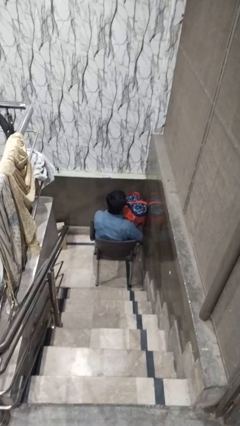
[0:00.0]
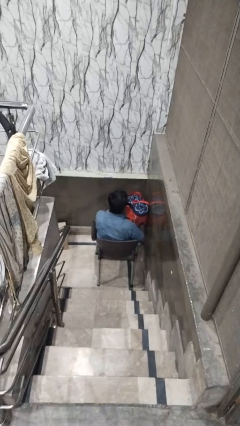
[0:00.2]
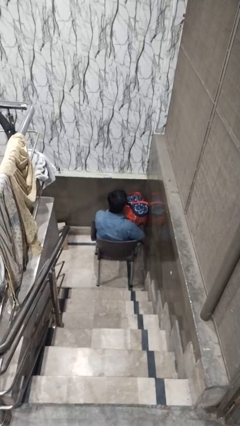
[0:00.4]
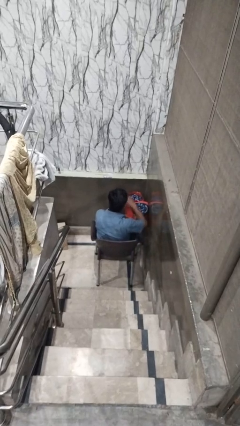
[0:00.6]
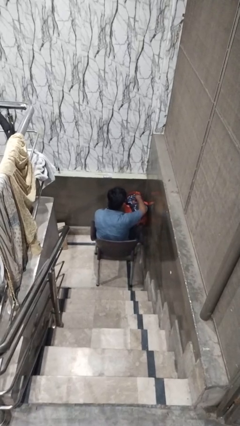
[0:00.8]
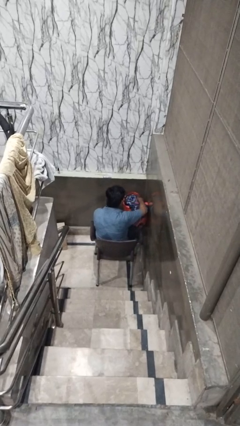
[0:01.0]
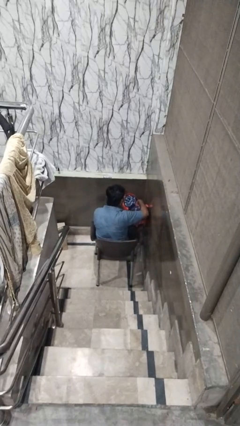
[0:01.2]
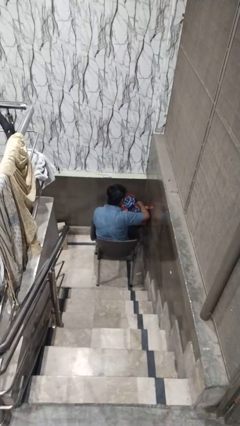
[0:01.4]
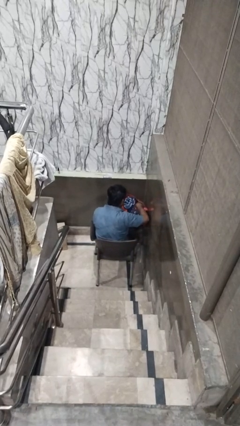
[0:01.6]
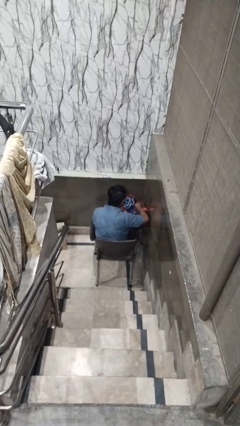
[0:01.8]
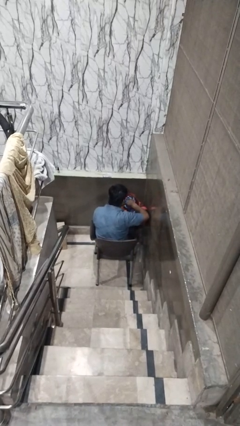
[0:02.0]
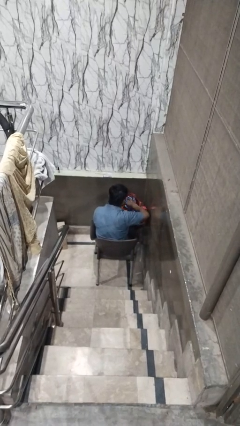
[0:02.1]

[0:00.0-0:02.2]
person searches in bag

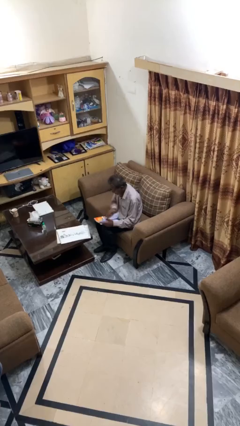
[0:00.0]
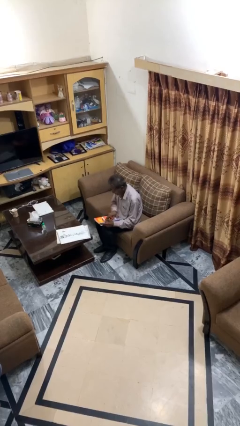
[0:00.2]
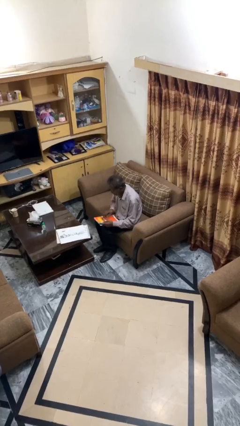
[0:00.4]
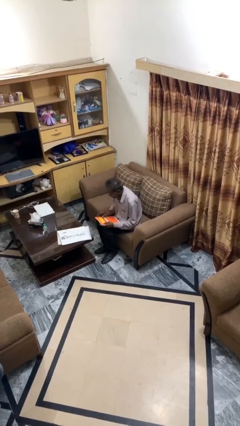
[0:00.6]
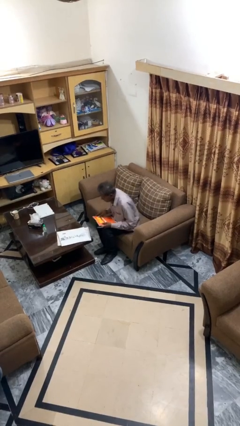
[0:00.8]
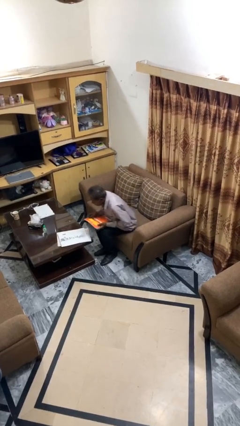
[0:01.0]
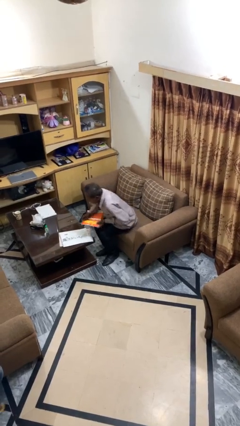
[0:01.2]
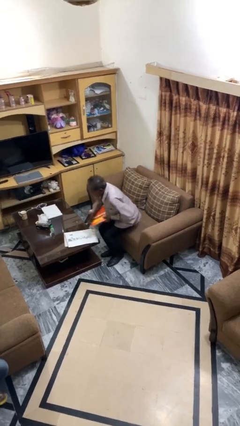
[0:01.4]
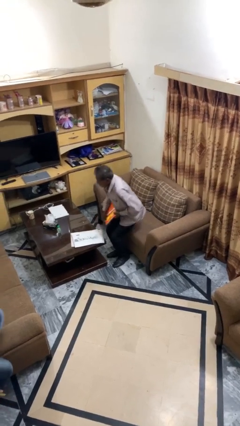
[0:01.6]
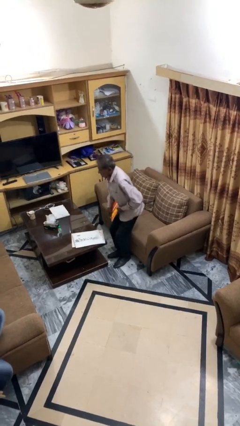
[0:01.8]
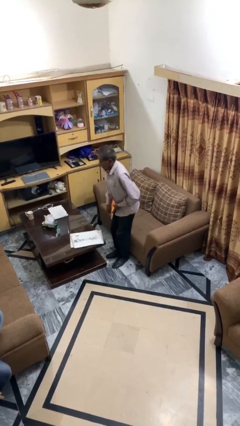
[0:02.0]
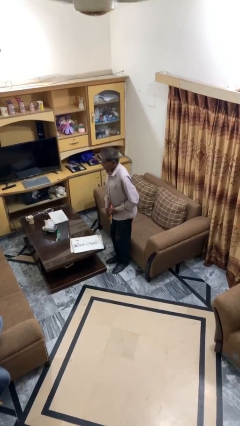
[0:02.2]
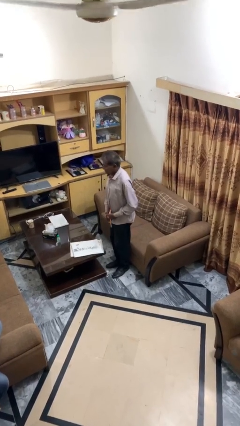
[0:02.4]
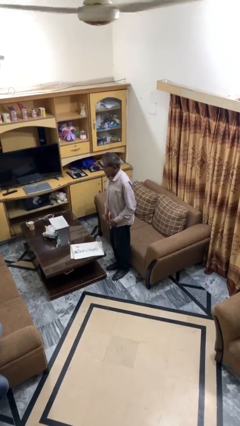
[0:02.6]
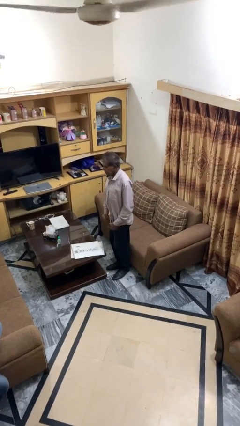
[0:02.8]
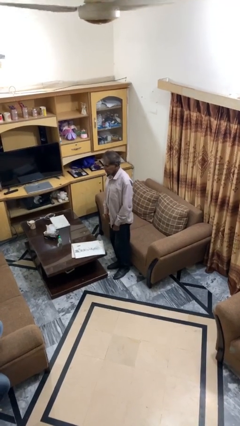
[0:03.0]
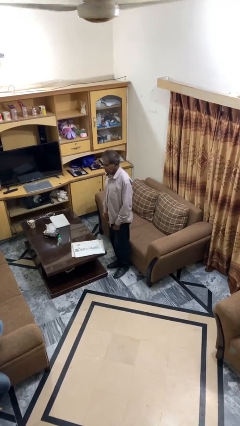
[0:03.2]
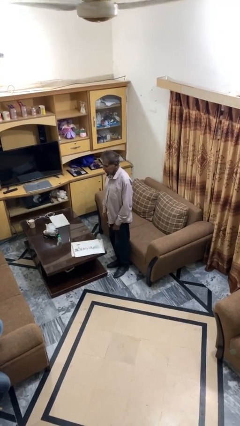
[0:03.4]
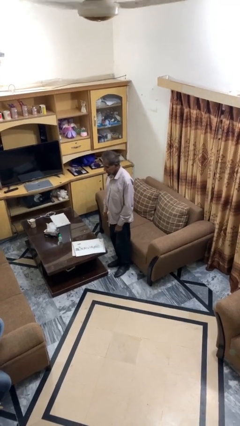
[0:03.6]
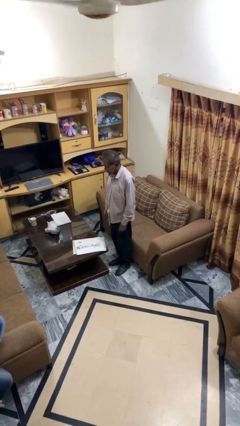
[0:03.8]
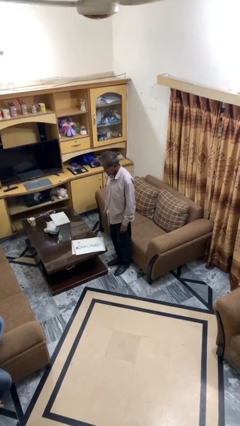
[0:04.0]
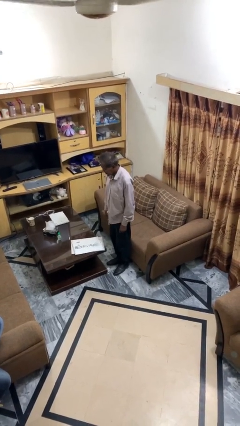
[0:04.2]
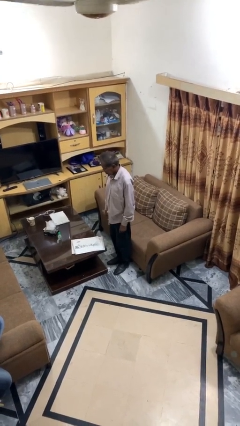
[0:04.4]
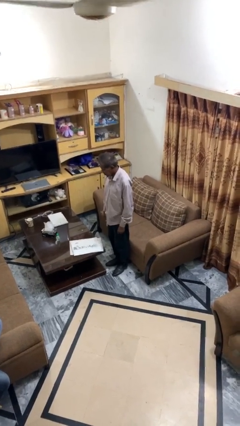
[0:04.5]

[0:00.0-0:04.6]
person stands up

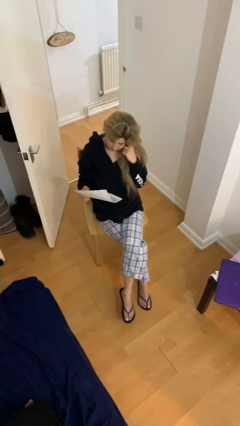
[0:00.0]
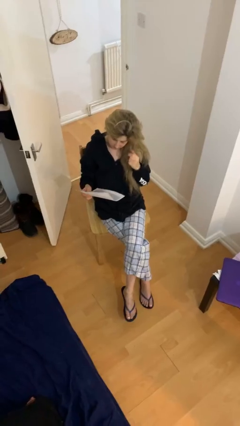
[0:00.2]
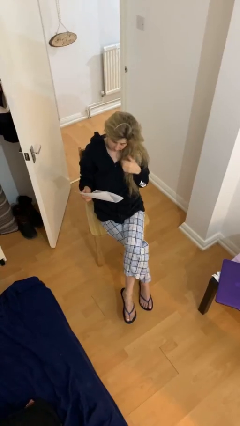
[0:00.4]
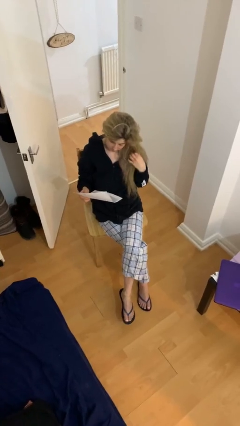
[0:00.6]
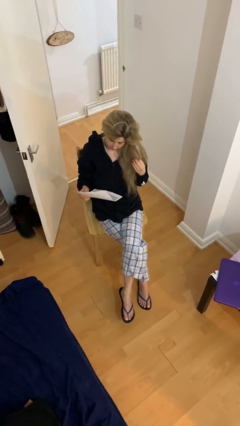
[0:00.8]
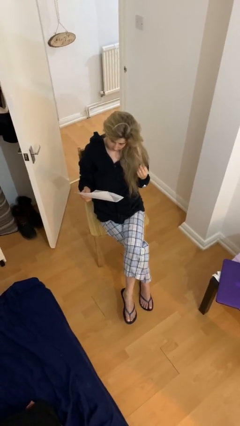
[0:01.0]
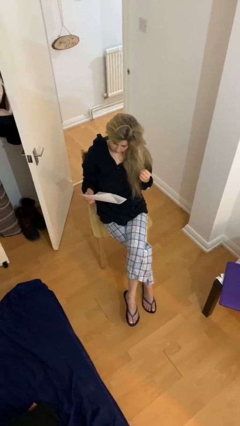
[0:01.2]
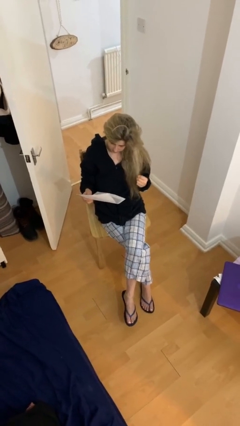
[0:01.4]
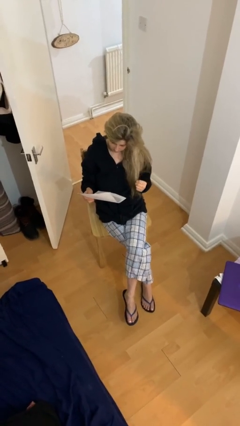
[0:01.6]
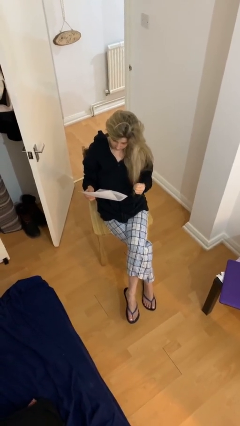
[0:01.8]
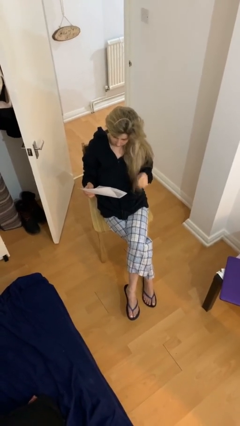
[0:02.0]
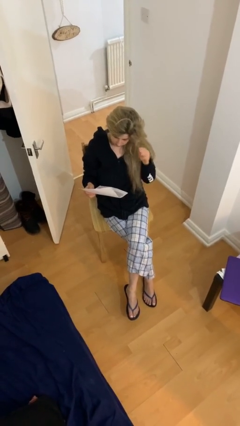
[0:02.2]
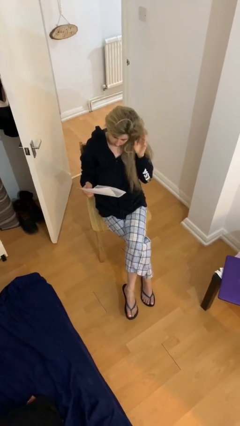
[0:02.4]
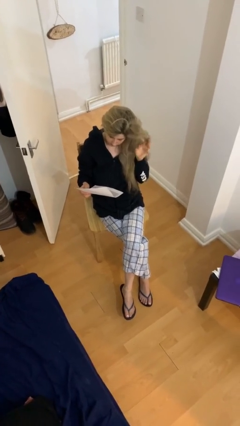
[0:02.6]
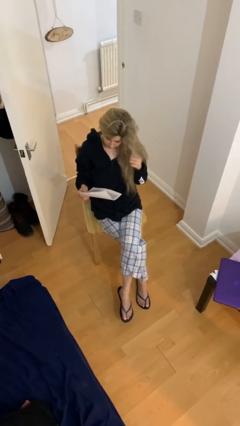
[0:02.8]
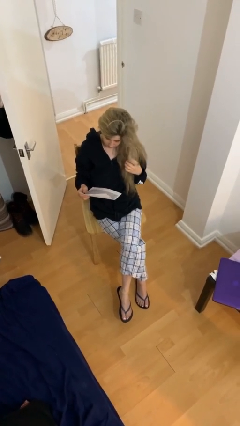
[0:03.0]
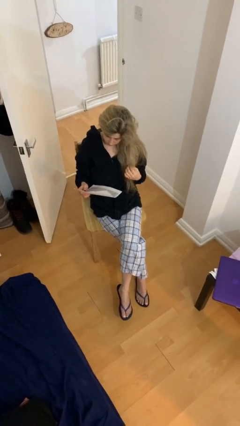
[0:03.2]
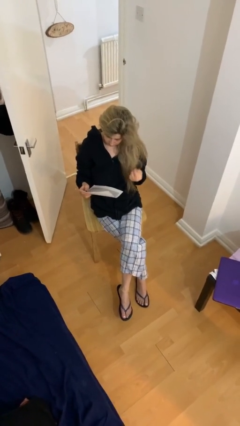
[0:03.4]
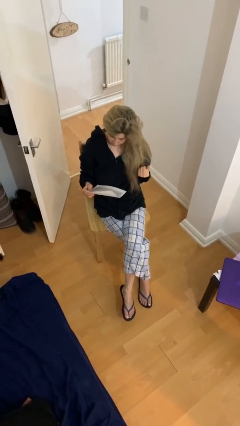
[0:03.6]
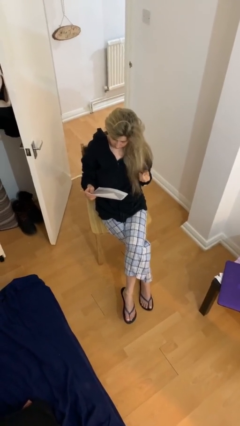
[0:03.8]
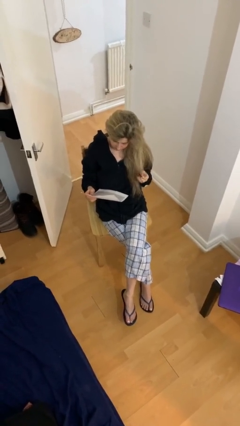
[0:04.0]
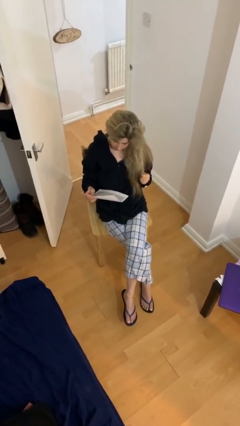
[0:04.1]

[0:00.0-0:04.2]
person reads document

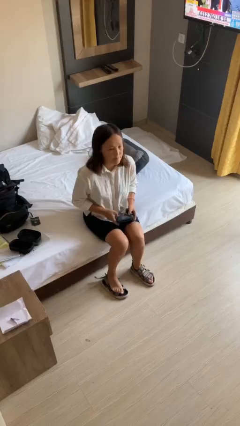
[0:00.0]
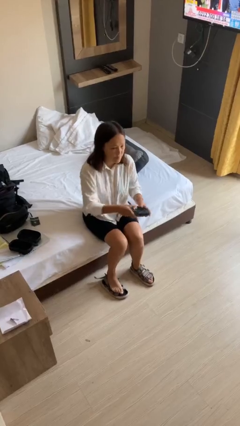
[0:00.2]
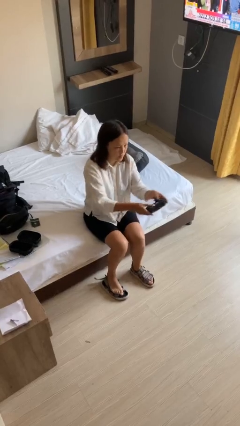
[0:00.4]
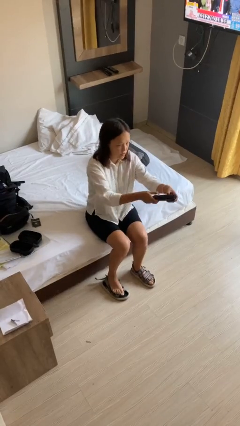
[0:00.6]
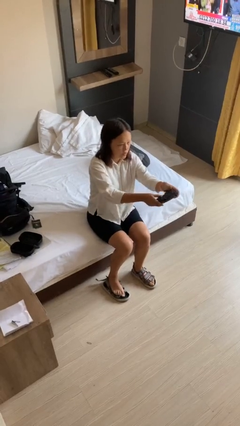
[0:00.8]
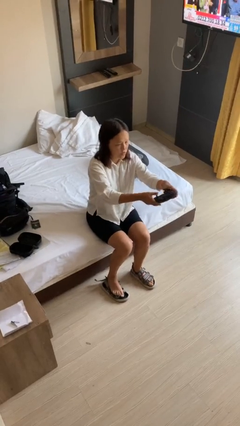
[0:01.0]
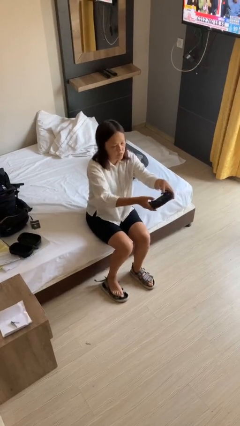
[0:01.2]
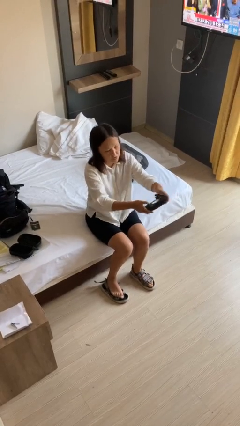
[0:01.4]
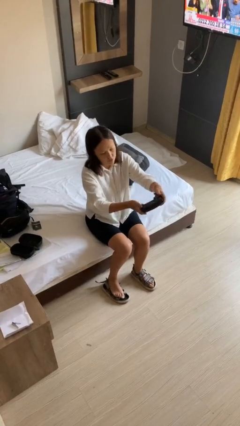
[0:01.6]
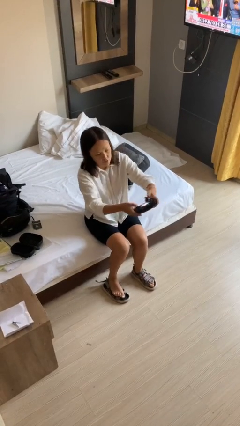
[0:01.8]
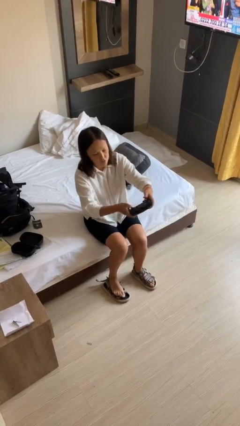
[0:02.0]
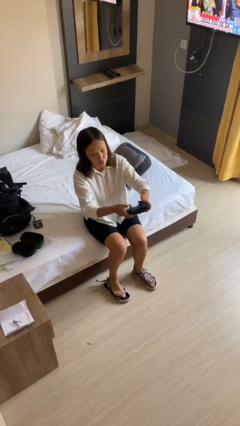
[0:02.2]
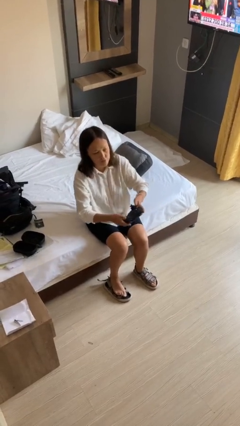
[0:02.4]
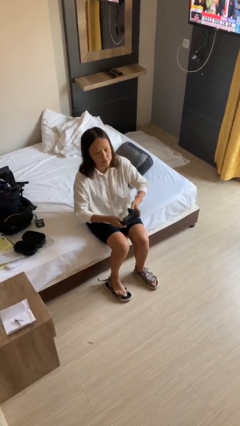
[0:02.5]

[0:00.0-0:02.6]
person interacts with handheld game

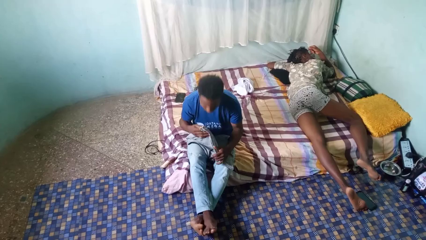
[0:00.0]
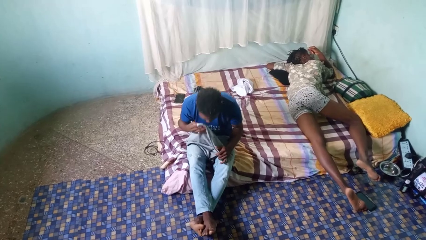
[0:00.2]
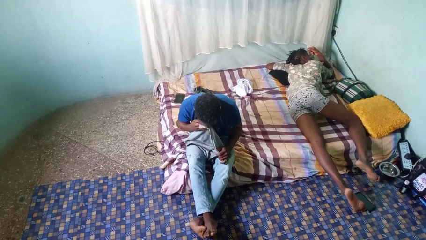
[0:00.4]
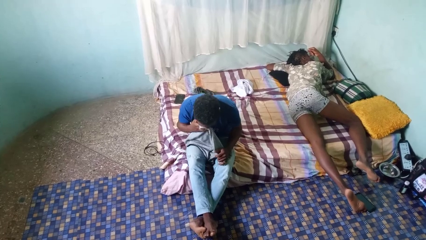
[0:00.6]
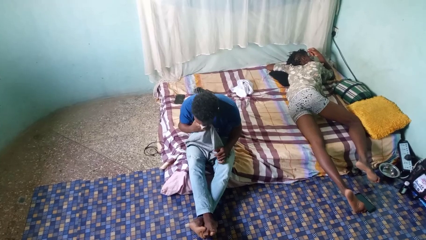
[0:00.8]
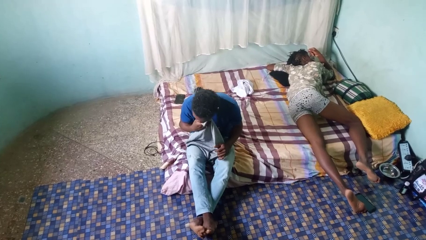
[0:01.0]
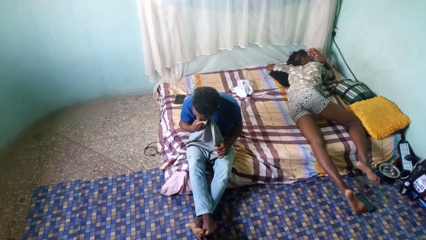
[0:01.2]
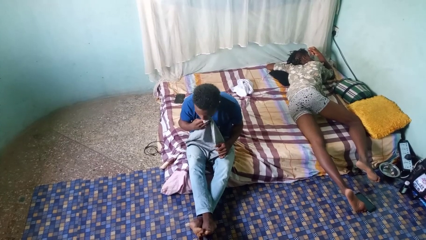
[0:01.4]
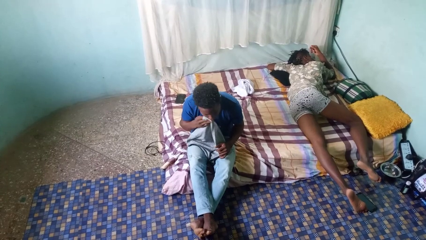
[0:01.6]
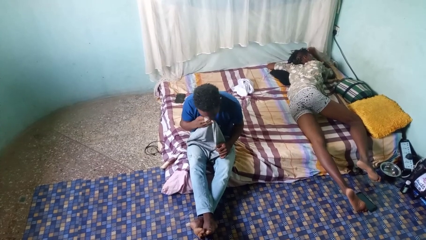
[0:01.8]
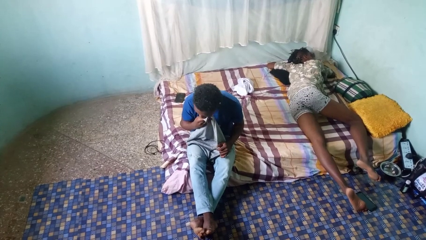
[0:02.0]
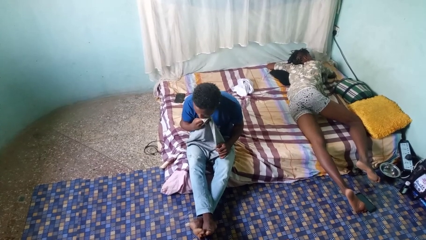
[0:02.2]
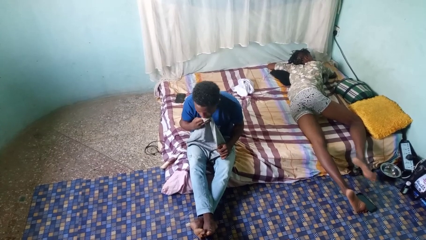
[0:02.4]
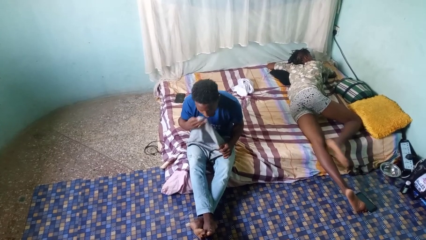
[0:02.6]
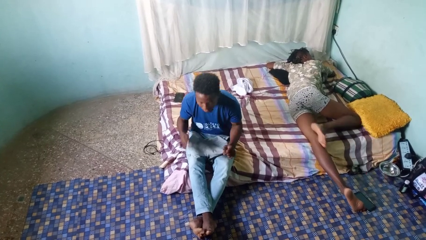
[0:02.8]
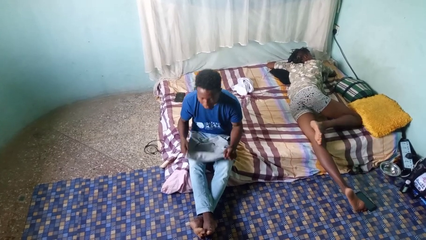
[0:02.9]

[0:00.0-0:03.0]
person wipes mouth with napkin

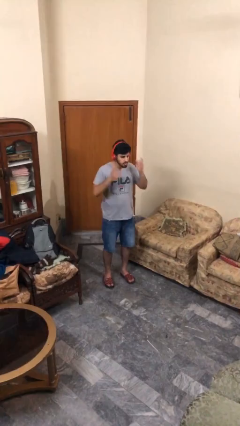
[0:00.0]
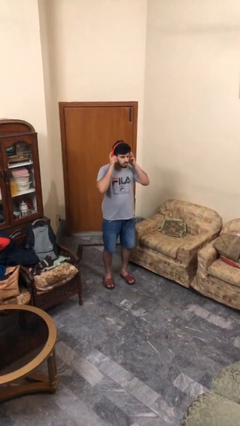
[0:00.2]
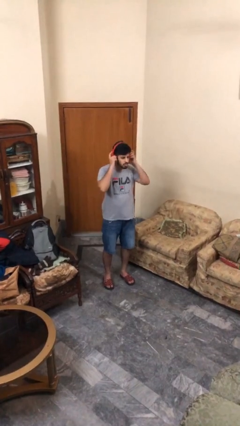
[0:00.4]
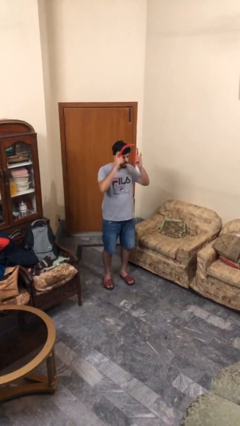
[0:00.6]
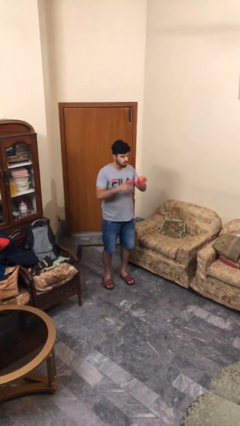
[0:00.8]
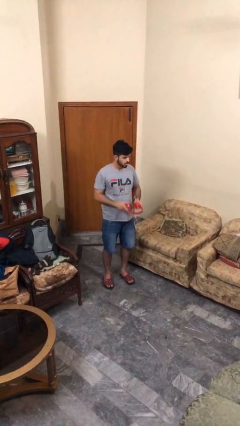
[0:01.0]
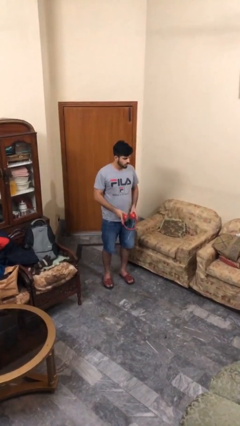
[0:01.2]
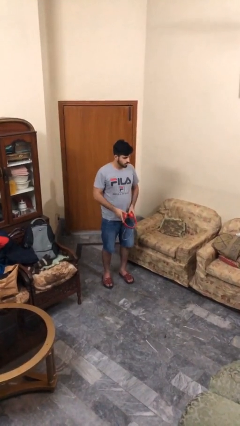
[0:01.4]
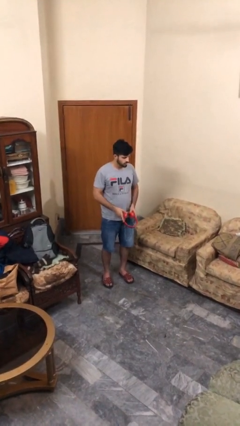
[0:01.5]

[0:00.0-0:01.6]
person takes off headphones
